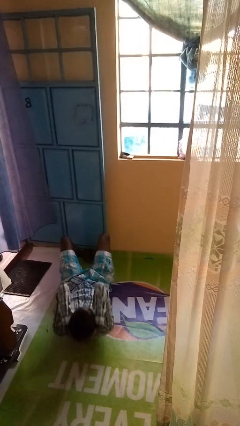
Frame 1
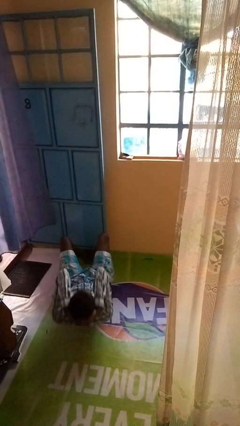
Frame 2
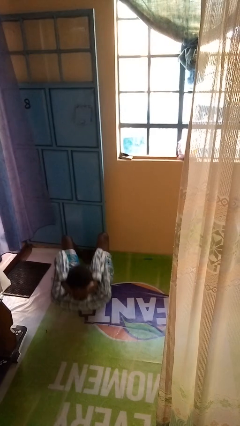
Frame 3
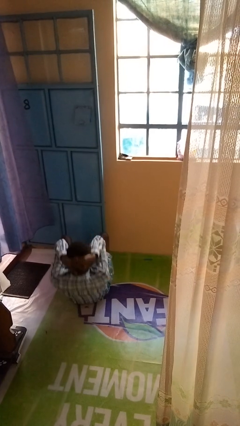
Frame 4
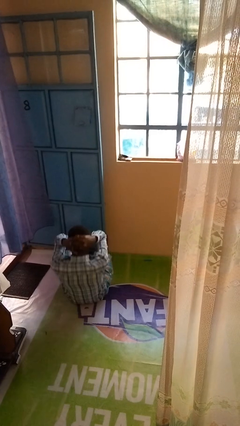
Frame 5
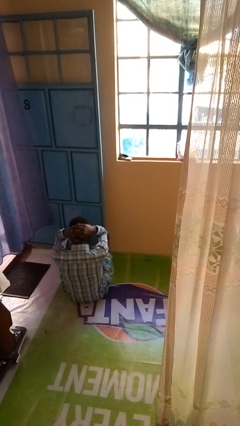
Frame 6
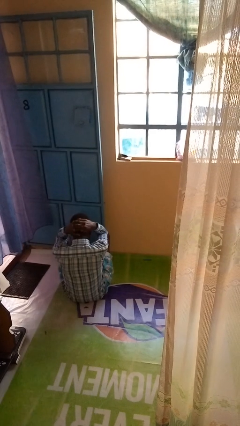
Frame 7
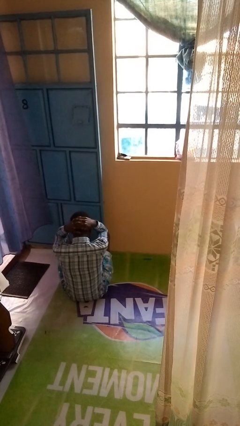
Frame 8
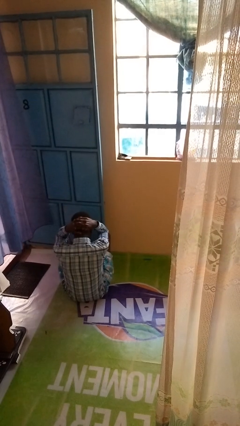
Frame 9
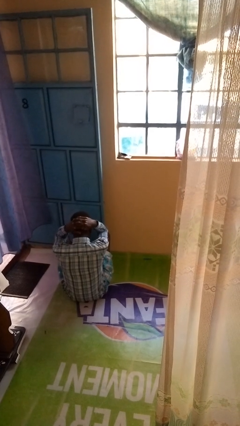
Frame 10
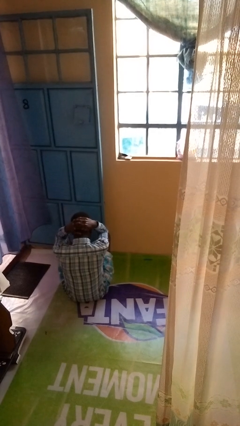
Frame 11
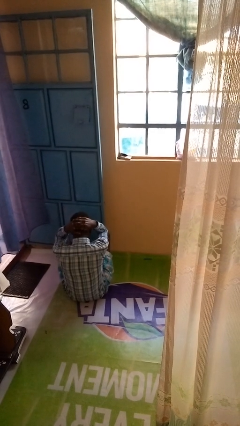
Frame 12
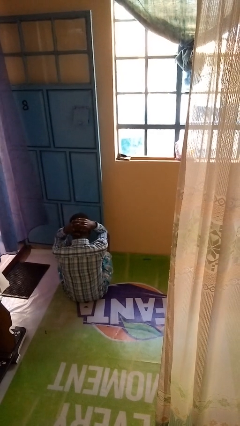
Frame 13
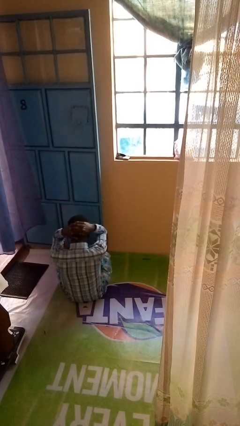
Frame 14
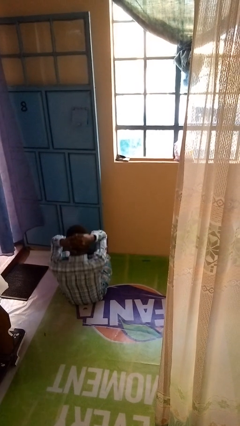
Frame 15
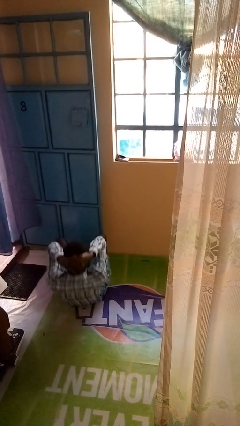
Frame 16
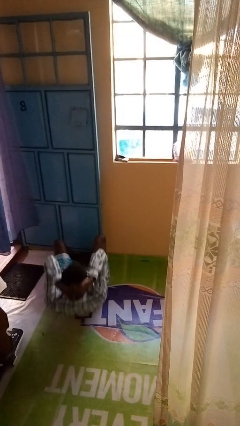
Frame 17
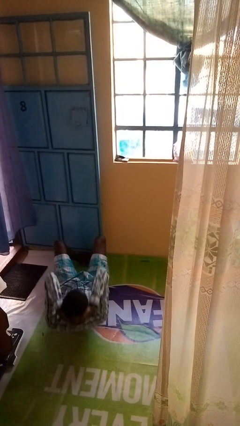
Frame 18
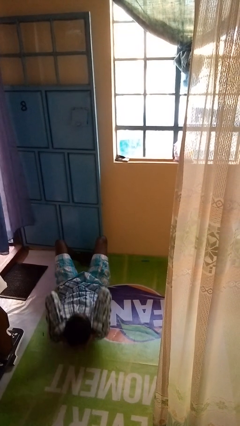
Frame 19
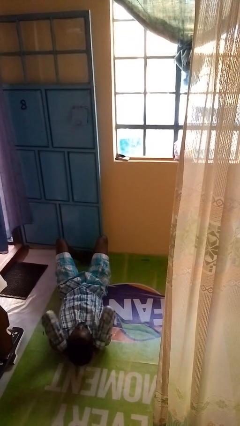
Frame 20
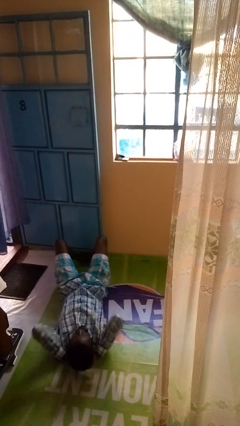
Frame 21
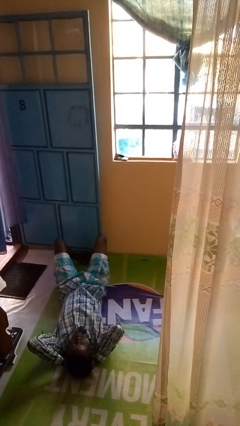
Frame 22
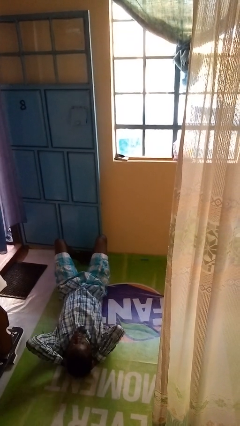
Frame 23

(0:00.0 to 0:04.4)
person exercises with situp

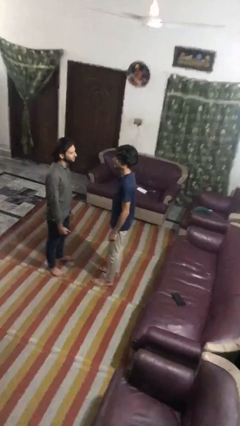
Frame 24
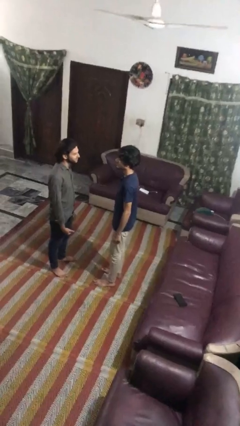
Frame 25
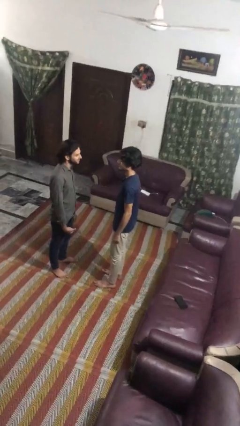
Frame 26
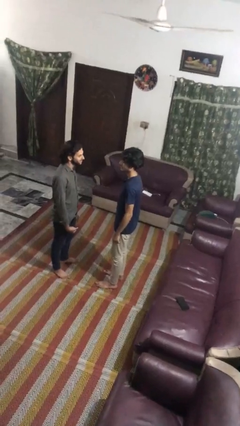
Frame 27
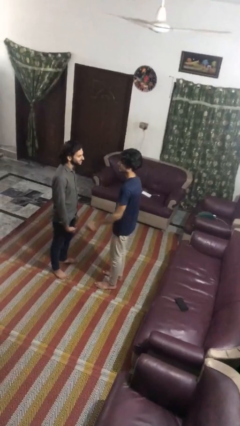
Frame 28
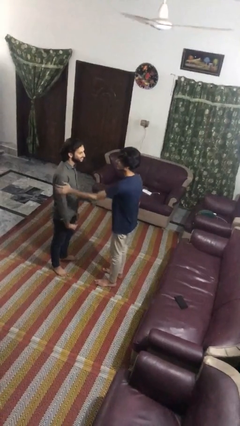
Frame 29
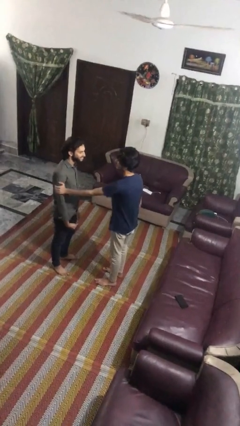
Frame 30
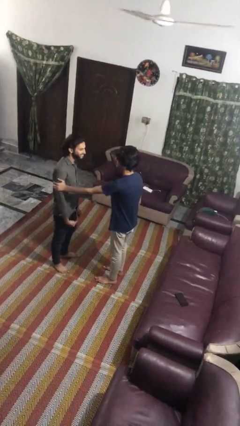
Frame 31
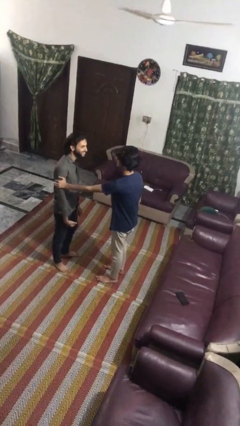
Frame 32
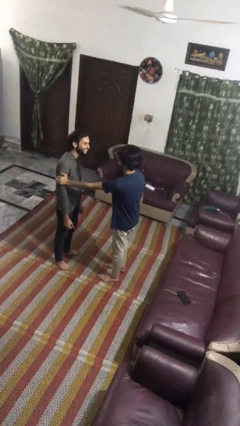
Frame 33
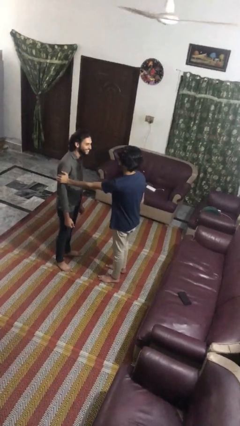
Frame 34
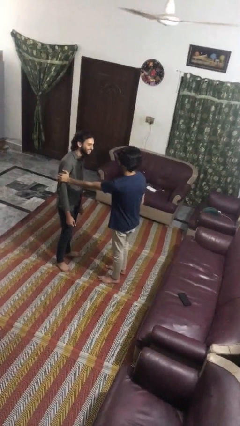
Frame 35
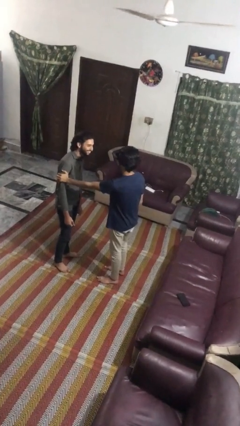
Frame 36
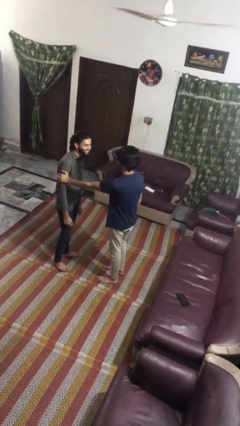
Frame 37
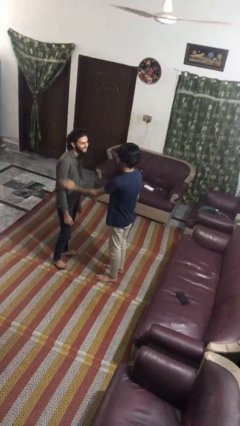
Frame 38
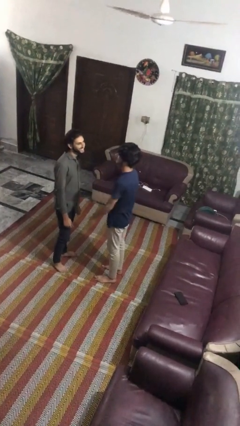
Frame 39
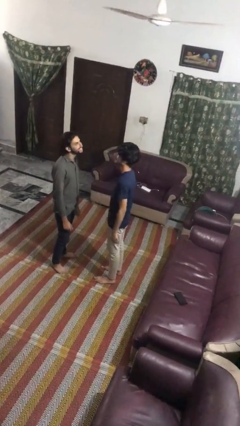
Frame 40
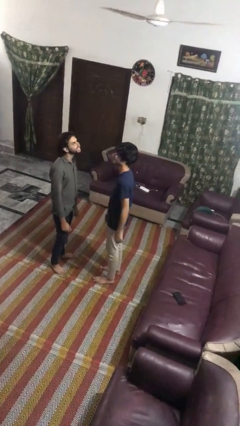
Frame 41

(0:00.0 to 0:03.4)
person grabs person by bicep

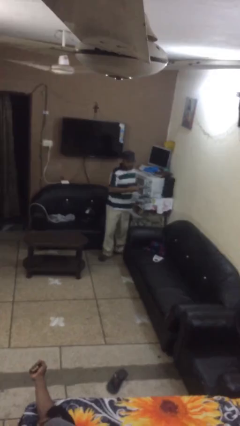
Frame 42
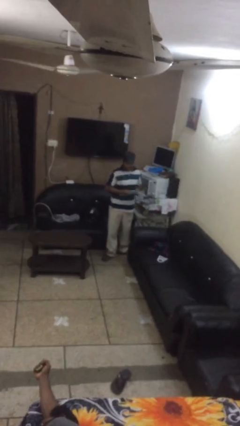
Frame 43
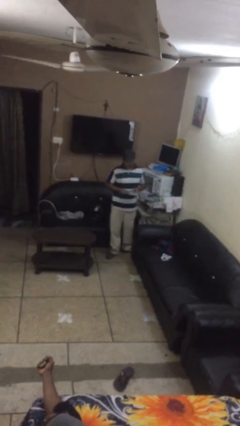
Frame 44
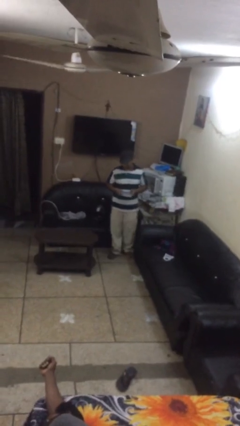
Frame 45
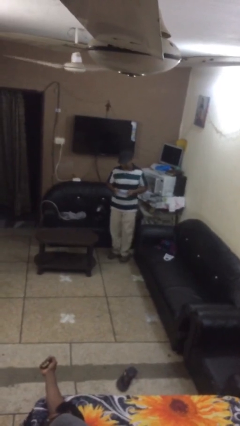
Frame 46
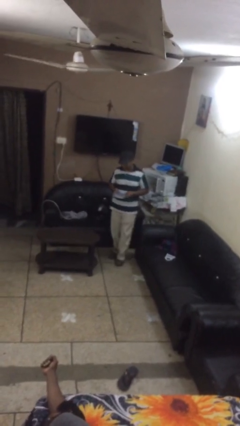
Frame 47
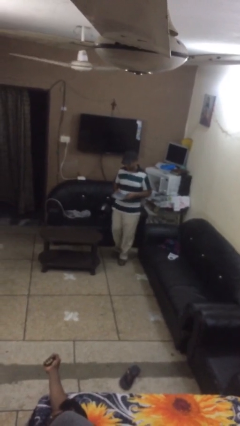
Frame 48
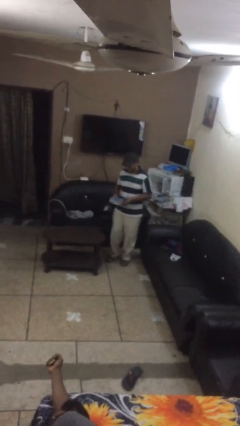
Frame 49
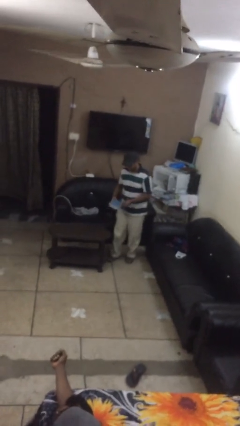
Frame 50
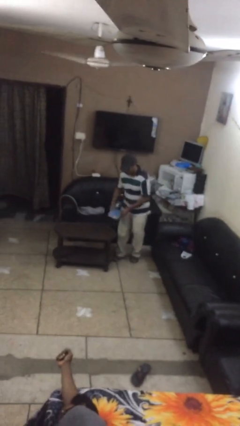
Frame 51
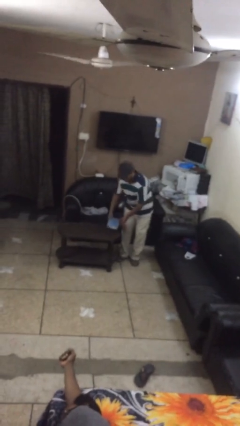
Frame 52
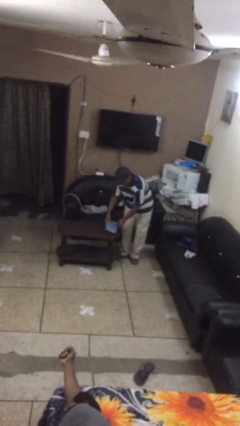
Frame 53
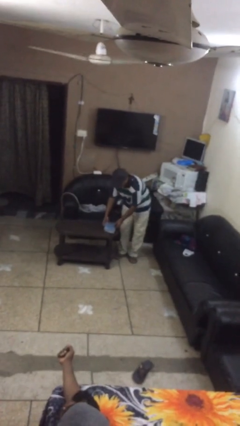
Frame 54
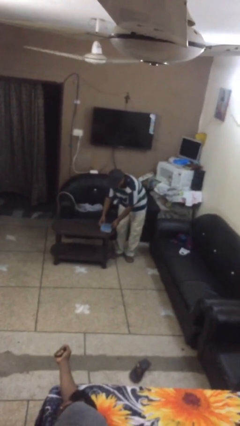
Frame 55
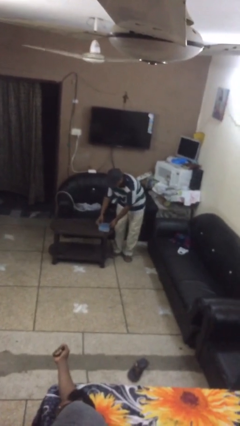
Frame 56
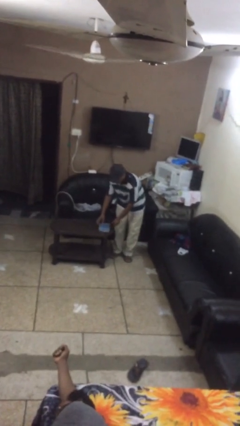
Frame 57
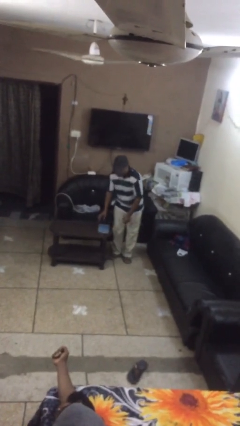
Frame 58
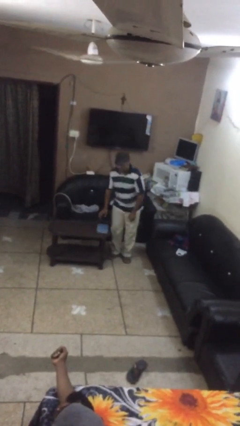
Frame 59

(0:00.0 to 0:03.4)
person puts down object on table

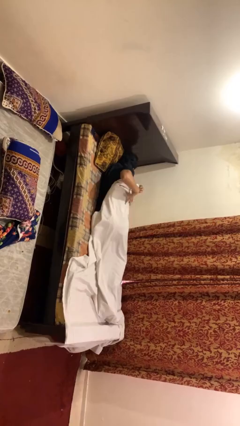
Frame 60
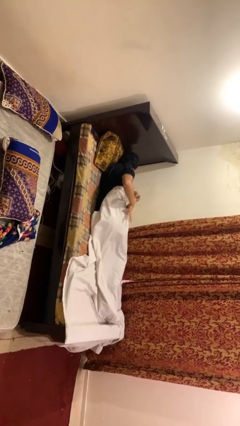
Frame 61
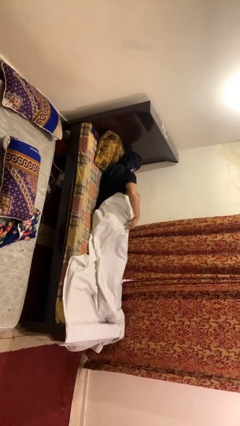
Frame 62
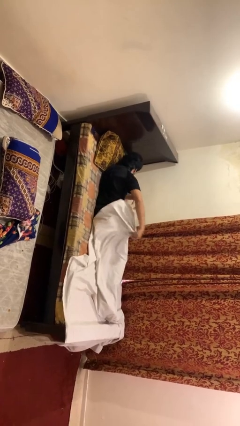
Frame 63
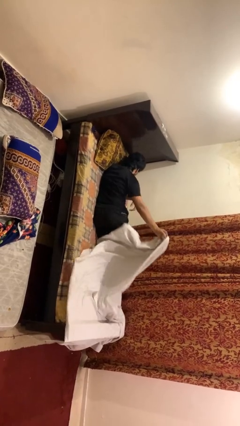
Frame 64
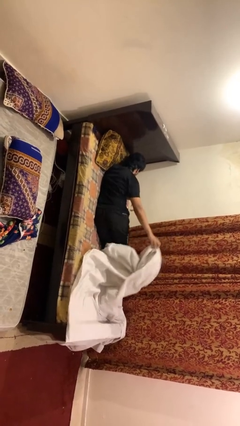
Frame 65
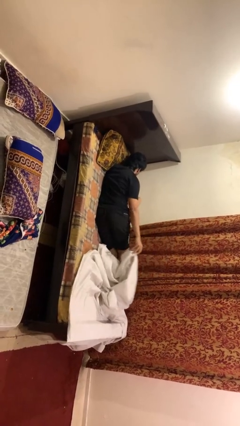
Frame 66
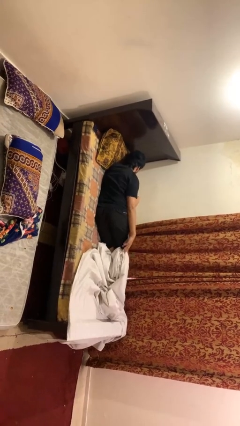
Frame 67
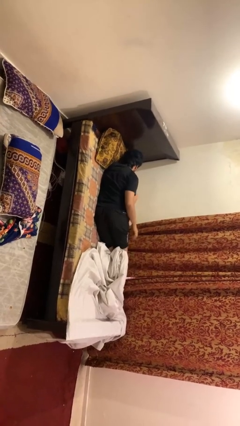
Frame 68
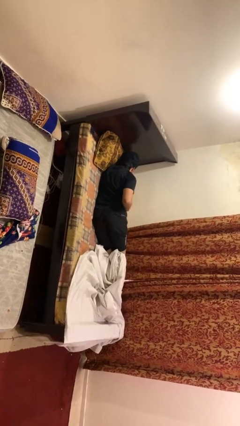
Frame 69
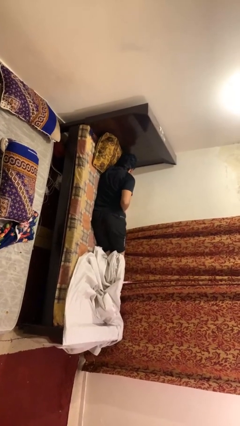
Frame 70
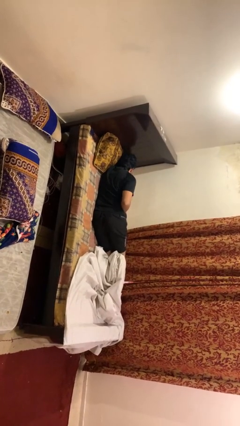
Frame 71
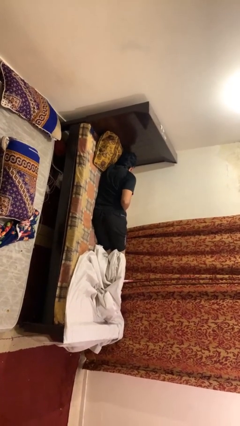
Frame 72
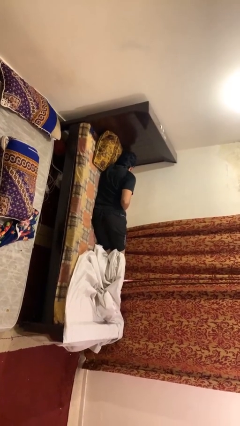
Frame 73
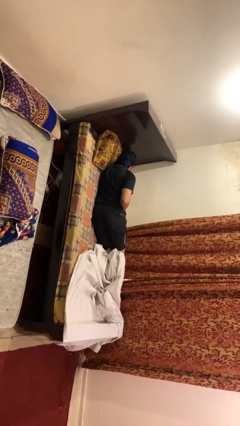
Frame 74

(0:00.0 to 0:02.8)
person uncovers with bedsheets

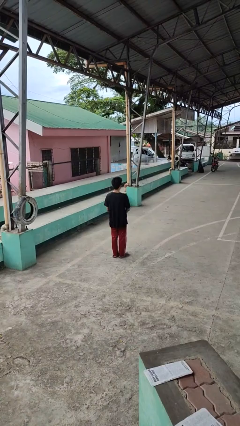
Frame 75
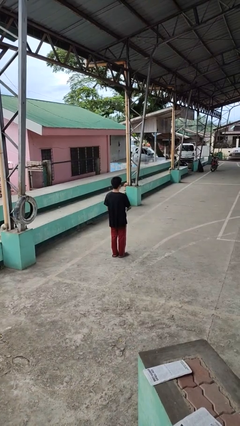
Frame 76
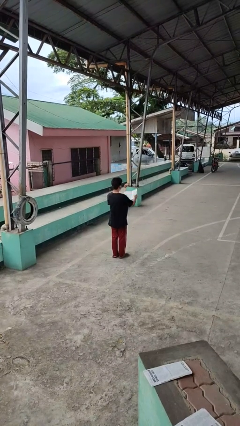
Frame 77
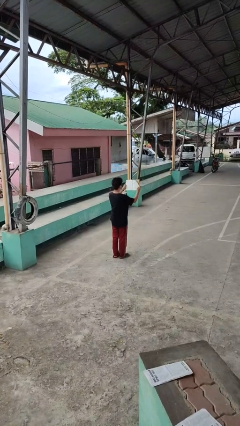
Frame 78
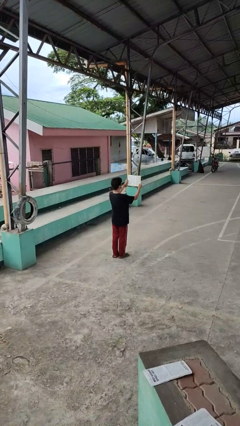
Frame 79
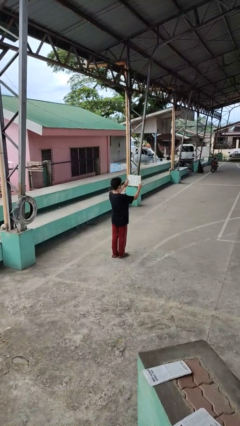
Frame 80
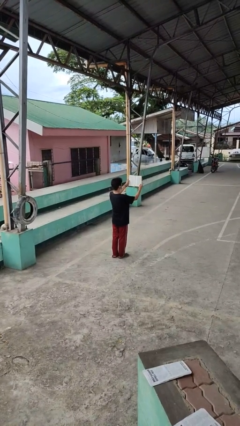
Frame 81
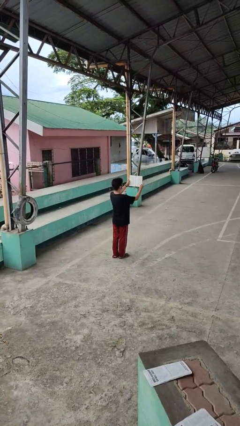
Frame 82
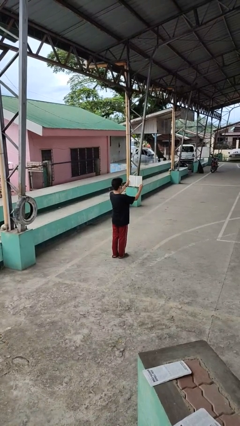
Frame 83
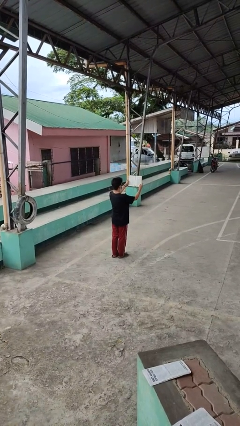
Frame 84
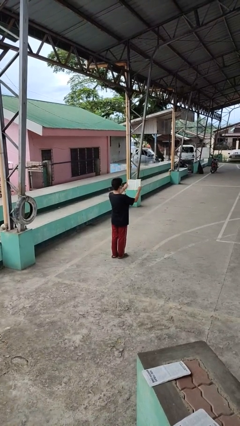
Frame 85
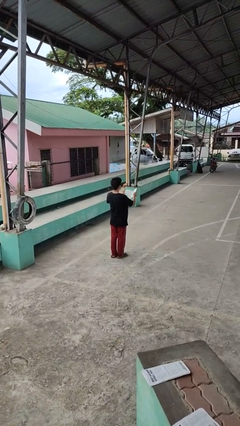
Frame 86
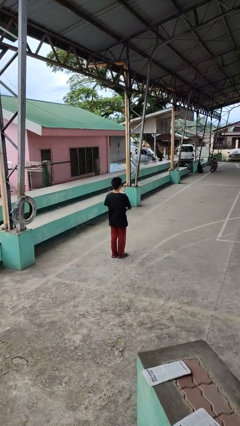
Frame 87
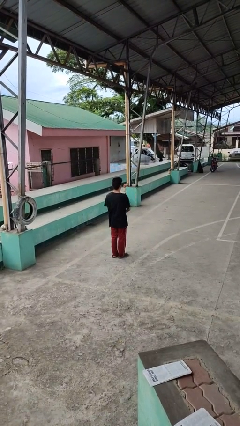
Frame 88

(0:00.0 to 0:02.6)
person reads book

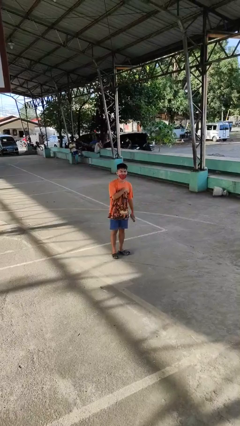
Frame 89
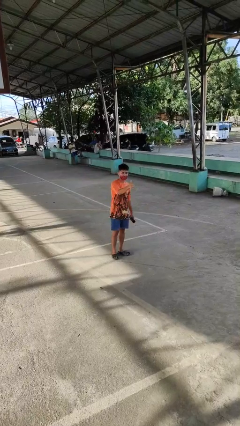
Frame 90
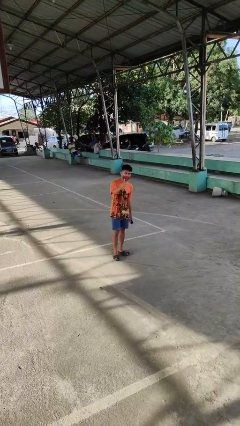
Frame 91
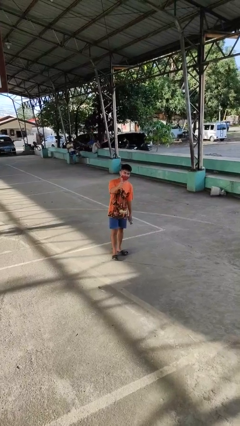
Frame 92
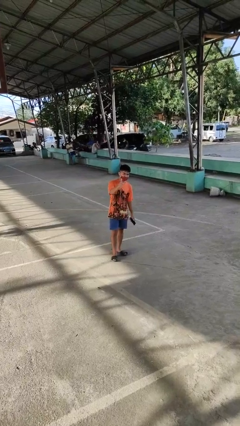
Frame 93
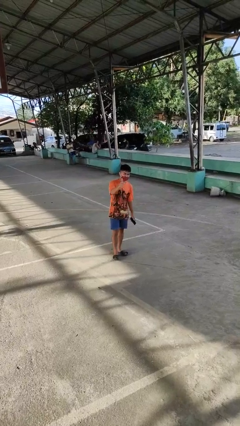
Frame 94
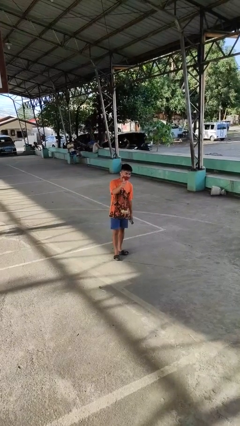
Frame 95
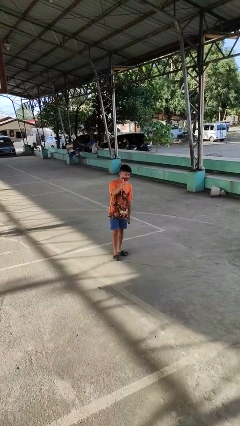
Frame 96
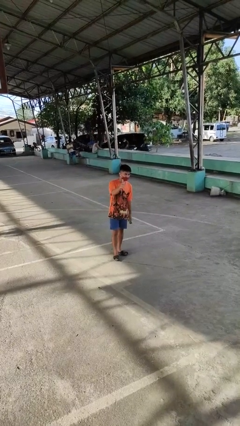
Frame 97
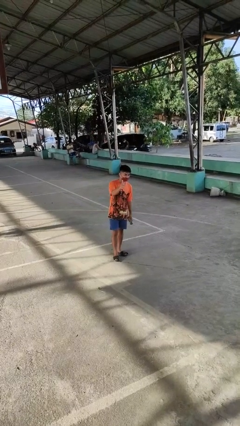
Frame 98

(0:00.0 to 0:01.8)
person gestures thumbs up
